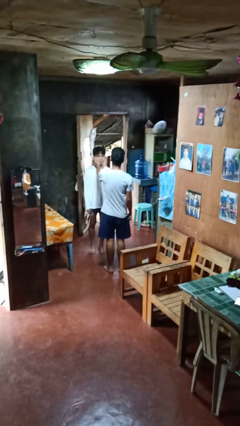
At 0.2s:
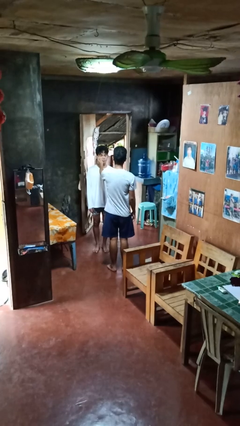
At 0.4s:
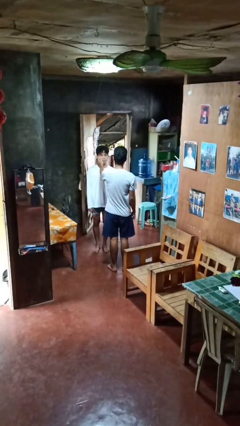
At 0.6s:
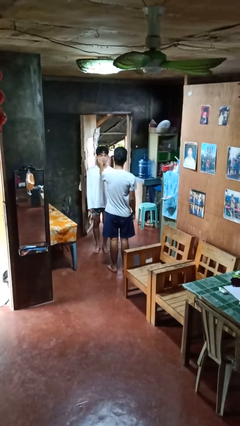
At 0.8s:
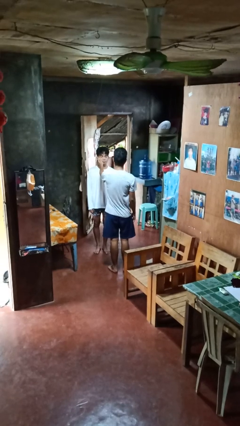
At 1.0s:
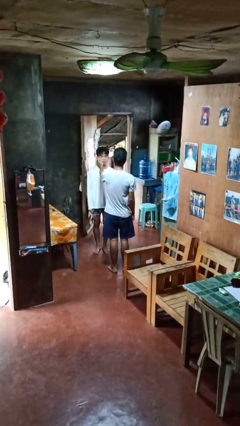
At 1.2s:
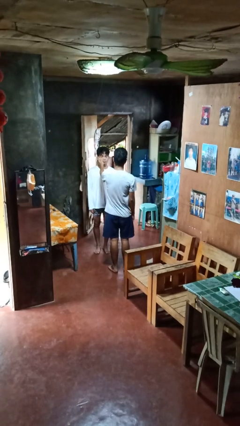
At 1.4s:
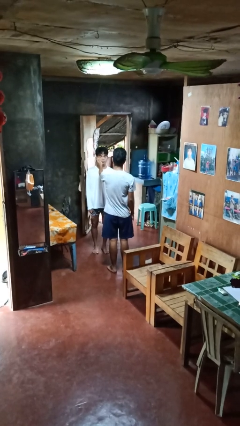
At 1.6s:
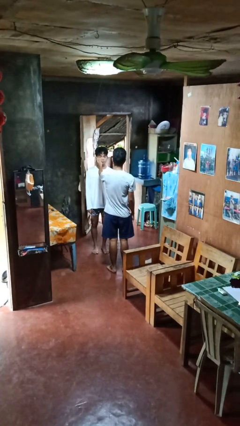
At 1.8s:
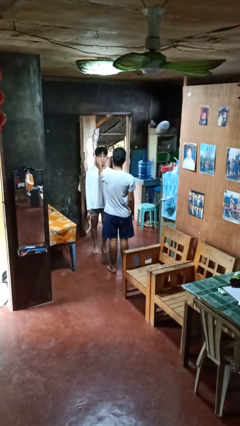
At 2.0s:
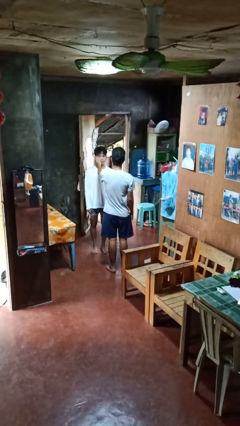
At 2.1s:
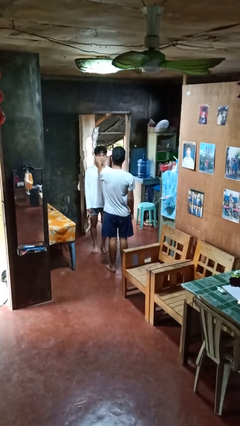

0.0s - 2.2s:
person touches face of person

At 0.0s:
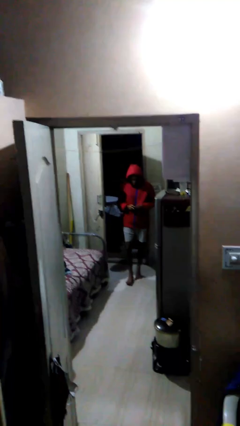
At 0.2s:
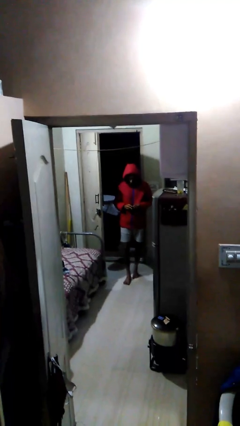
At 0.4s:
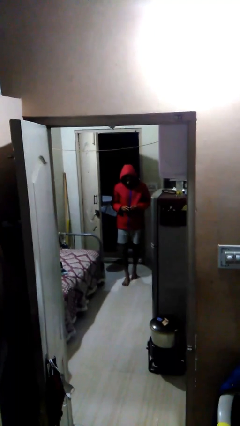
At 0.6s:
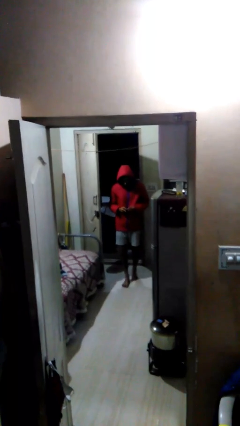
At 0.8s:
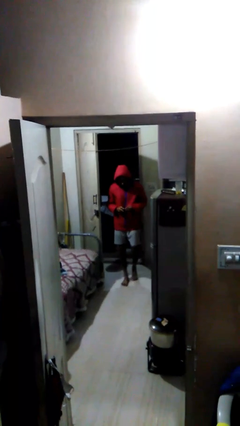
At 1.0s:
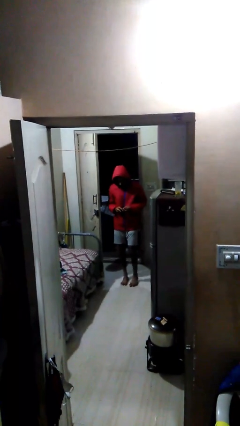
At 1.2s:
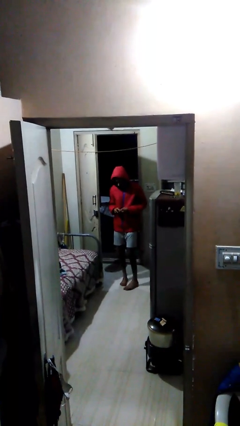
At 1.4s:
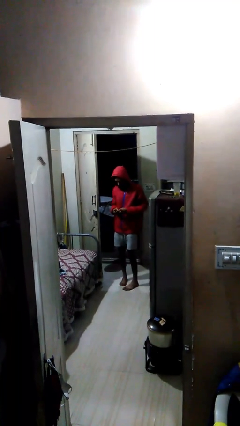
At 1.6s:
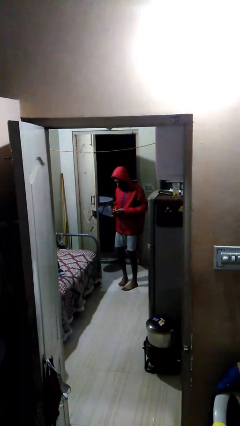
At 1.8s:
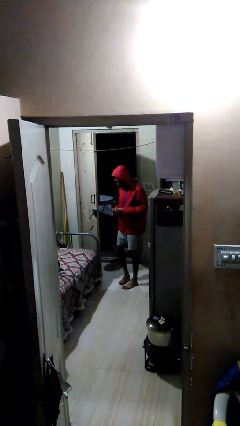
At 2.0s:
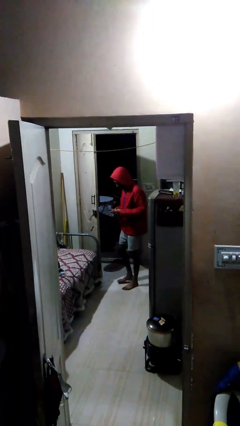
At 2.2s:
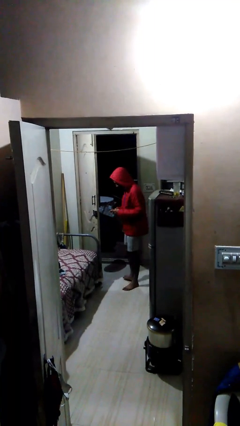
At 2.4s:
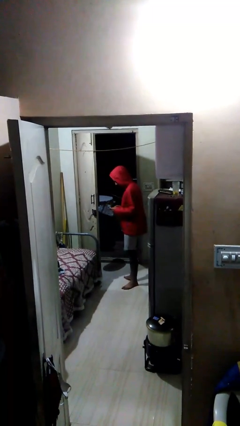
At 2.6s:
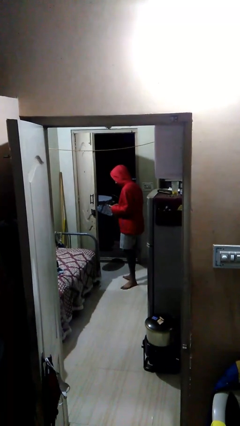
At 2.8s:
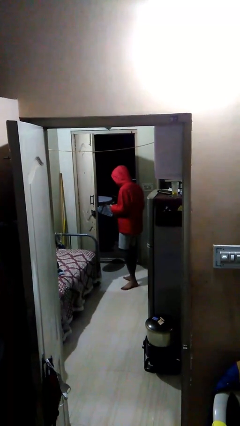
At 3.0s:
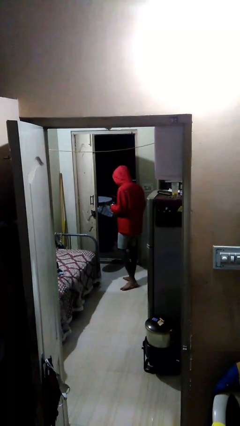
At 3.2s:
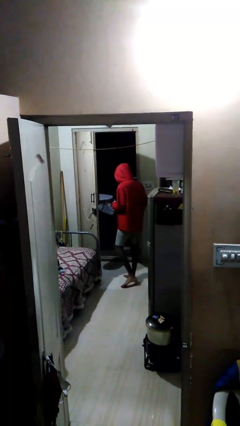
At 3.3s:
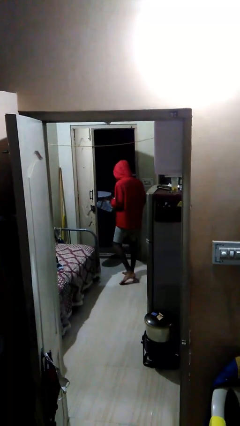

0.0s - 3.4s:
person enters scene through structure

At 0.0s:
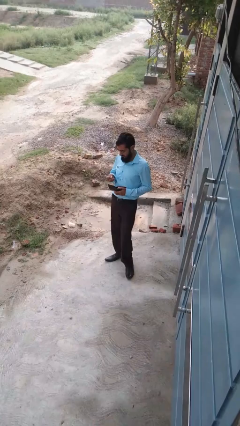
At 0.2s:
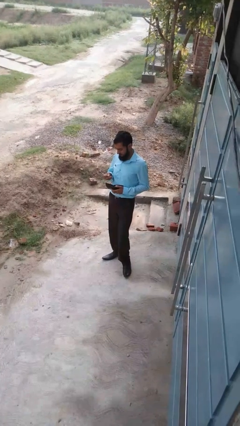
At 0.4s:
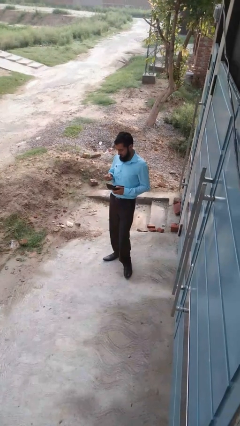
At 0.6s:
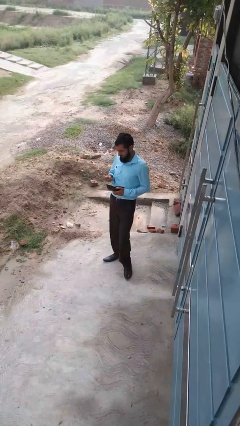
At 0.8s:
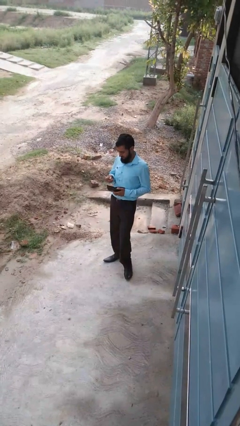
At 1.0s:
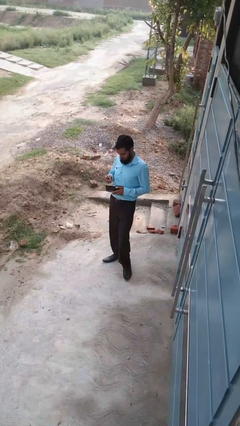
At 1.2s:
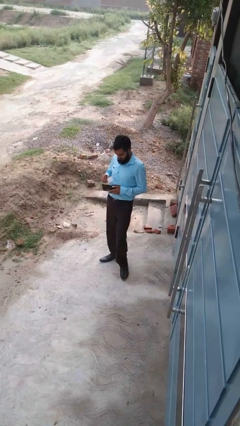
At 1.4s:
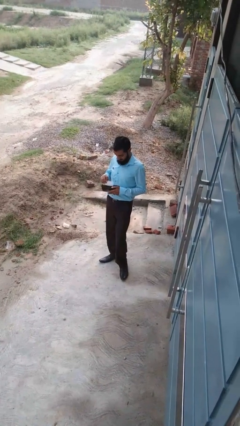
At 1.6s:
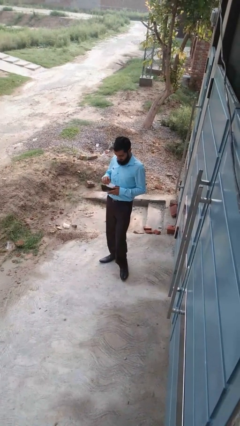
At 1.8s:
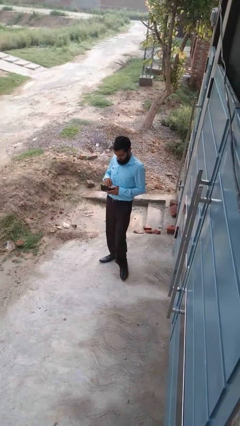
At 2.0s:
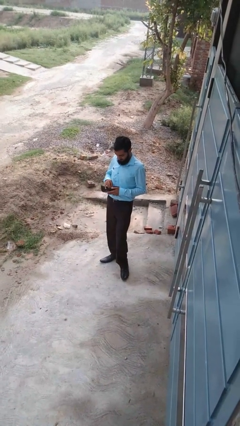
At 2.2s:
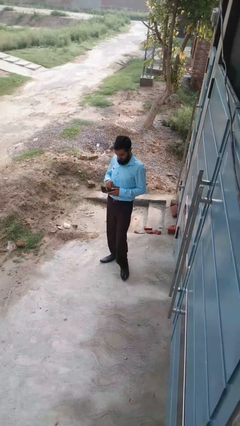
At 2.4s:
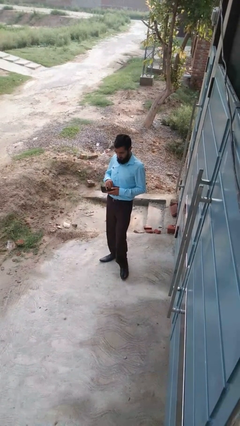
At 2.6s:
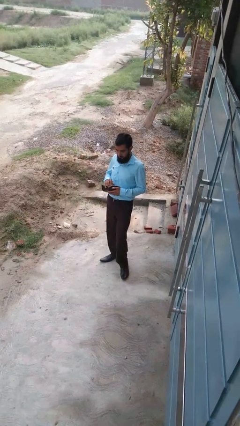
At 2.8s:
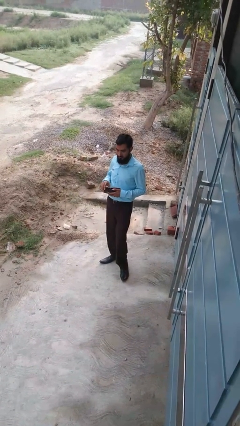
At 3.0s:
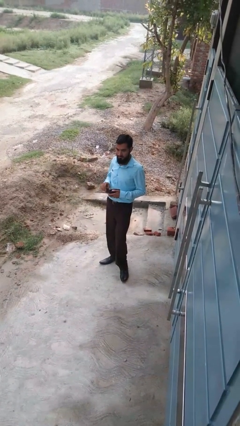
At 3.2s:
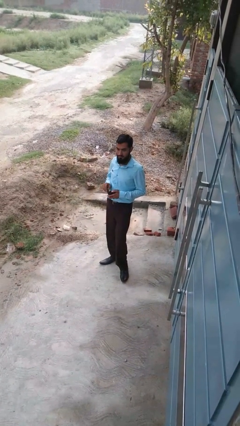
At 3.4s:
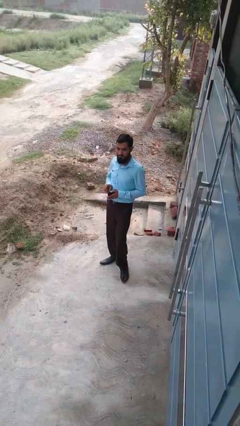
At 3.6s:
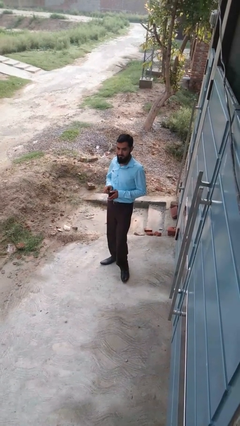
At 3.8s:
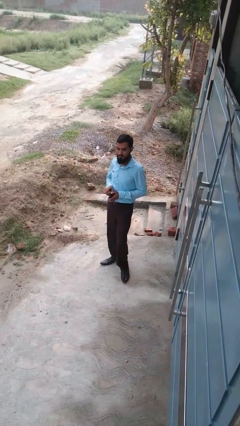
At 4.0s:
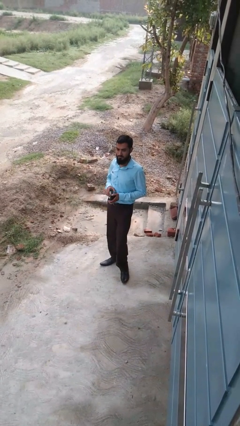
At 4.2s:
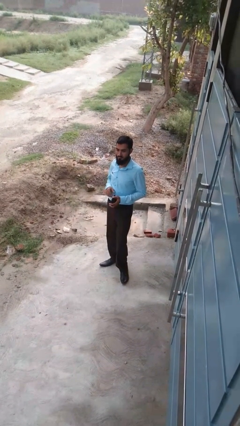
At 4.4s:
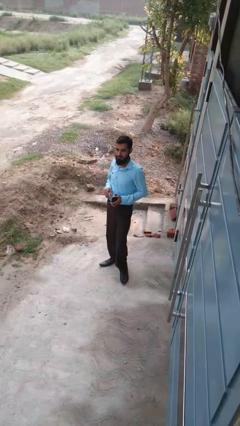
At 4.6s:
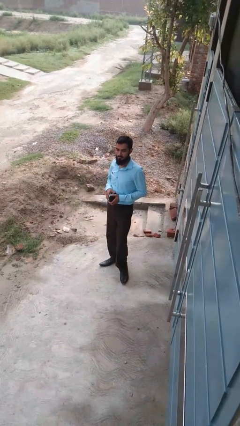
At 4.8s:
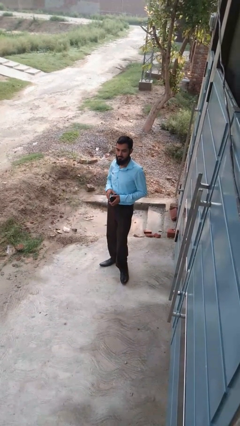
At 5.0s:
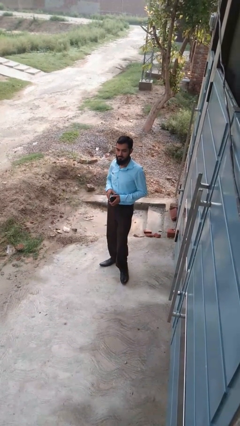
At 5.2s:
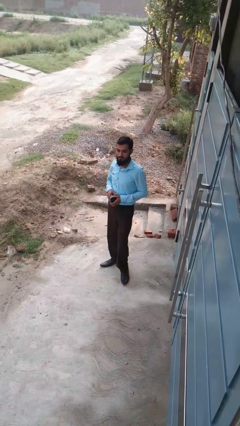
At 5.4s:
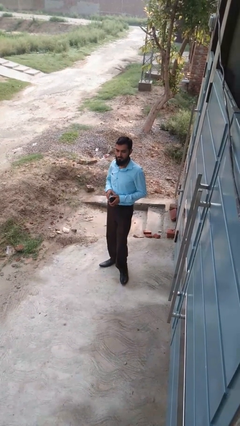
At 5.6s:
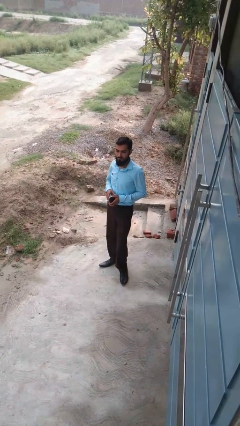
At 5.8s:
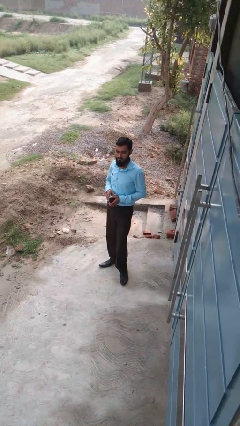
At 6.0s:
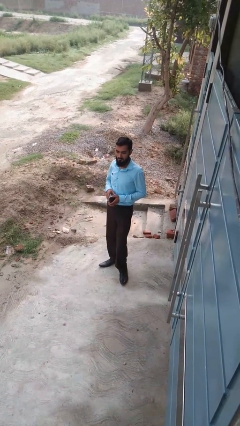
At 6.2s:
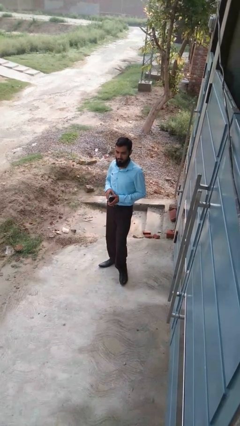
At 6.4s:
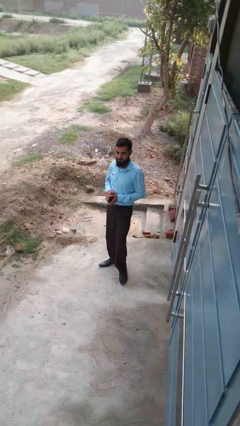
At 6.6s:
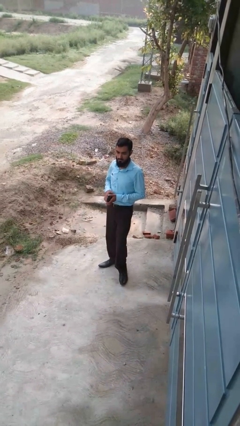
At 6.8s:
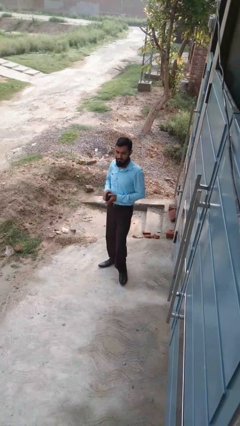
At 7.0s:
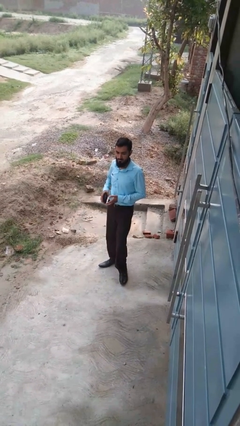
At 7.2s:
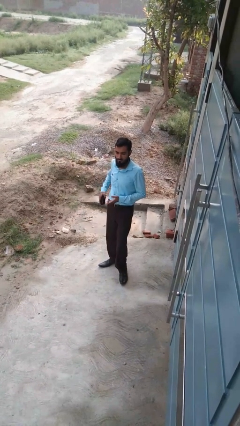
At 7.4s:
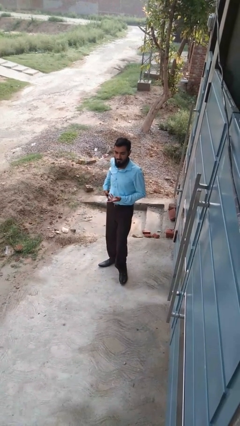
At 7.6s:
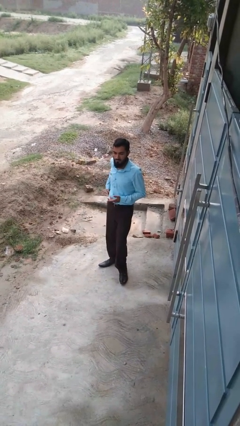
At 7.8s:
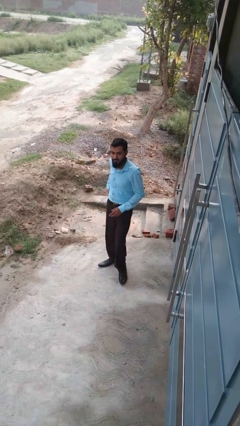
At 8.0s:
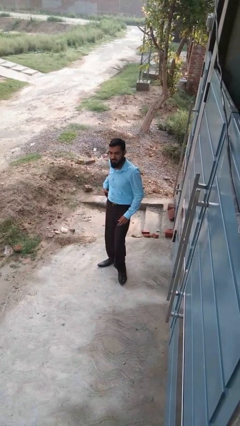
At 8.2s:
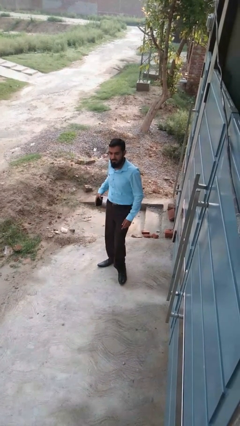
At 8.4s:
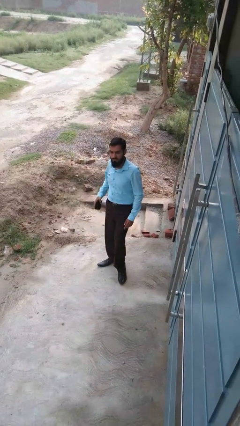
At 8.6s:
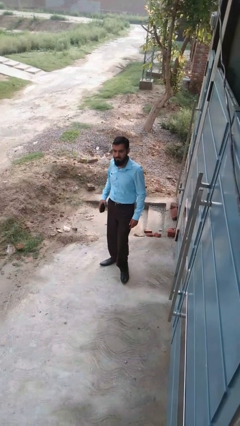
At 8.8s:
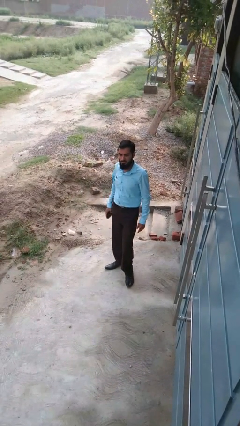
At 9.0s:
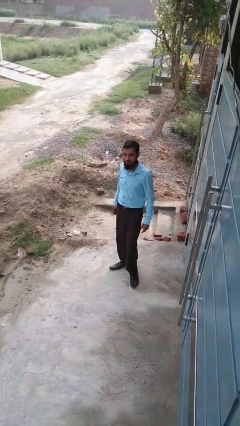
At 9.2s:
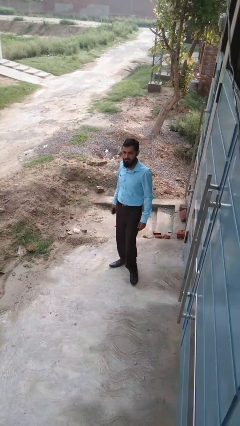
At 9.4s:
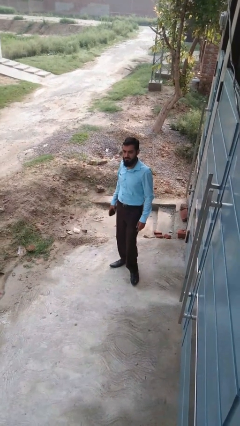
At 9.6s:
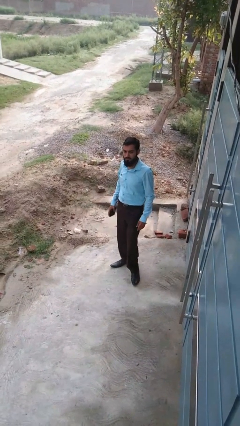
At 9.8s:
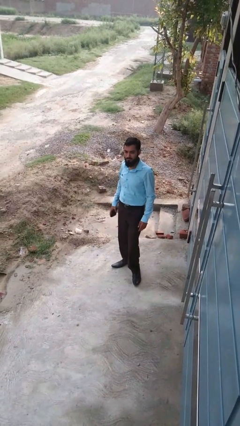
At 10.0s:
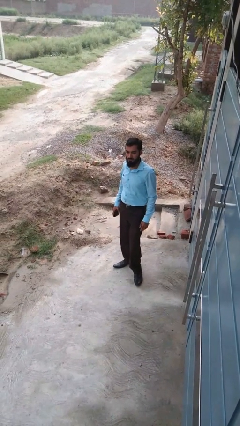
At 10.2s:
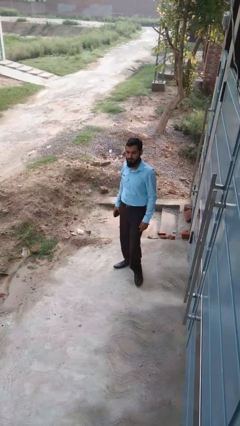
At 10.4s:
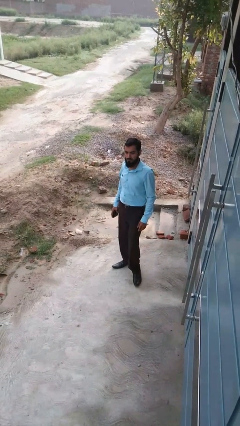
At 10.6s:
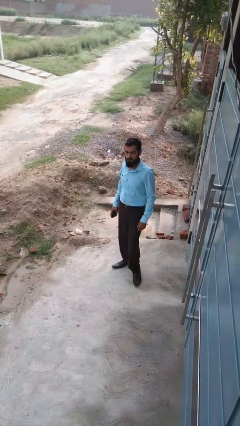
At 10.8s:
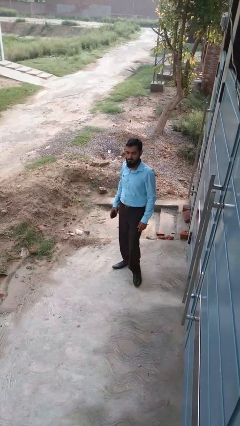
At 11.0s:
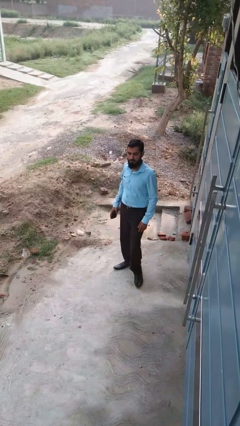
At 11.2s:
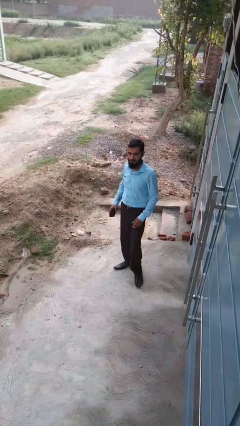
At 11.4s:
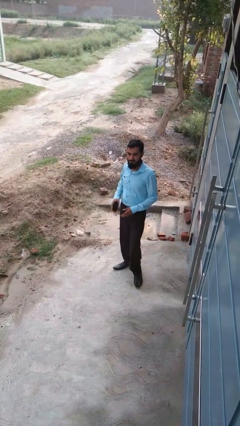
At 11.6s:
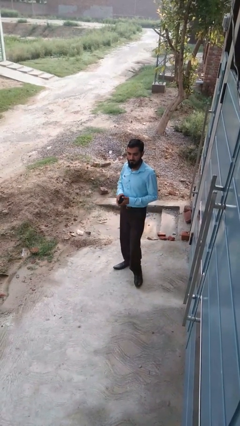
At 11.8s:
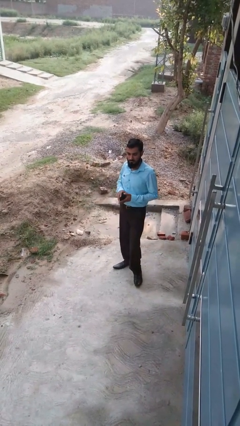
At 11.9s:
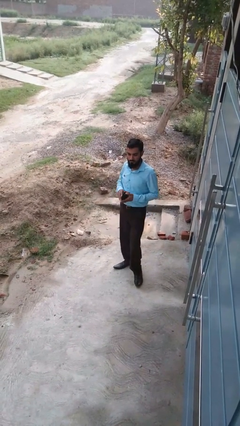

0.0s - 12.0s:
person puts object into purse

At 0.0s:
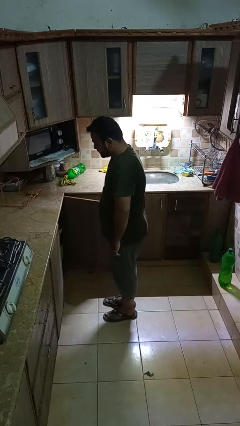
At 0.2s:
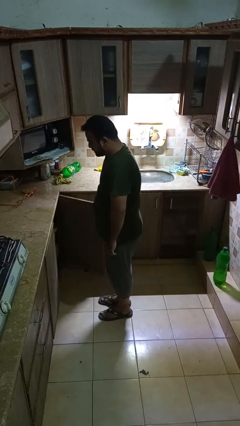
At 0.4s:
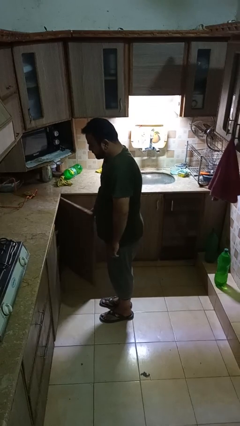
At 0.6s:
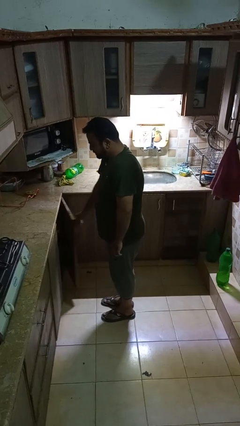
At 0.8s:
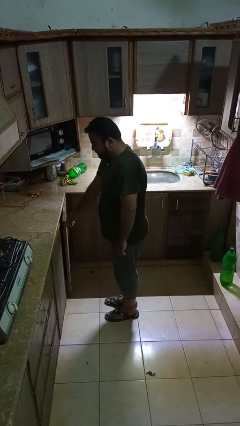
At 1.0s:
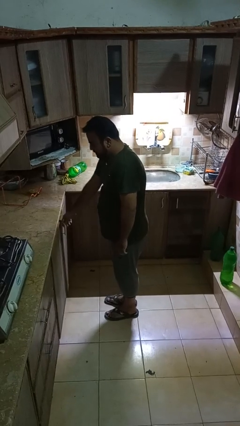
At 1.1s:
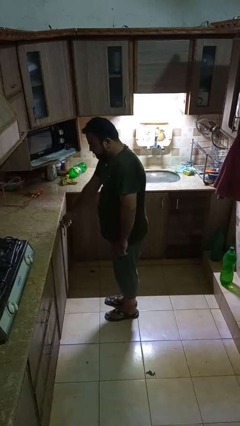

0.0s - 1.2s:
person closes cabinet
